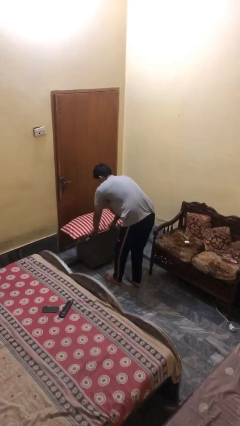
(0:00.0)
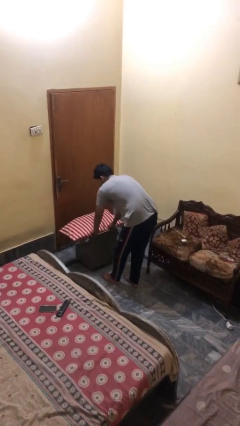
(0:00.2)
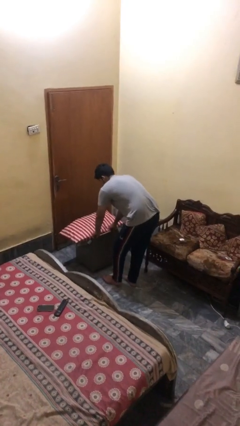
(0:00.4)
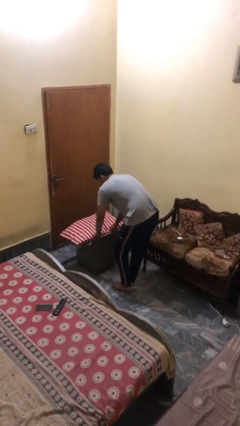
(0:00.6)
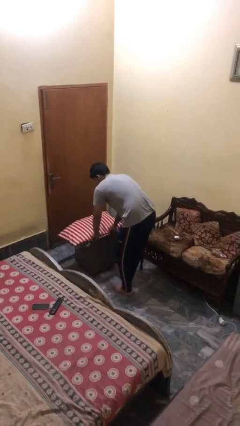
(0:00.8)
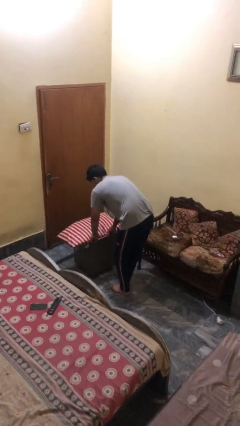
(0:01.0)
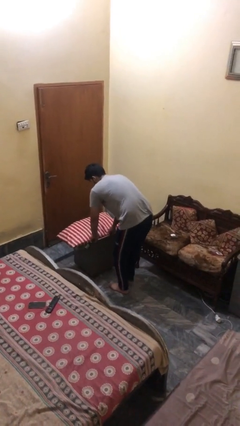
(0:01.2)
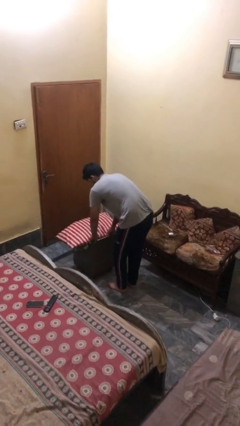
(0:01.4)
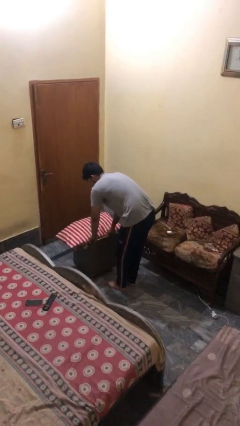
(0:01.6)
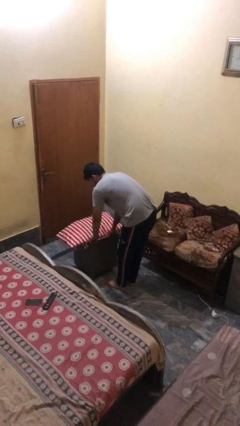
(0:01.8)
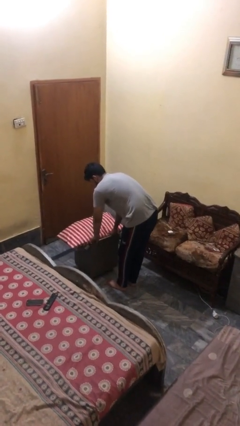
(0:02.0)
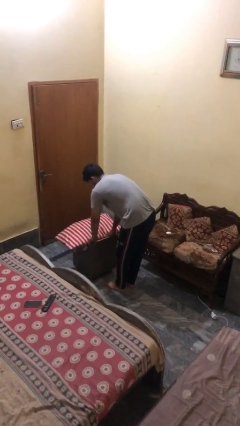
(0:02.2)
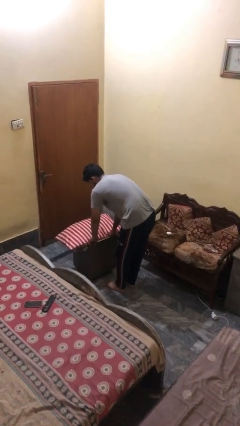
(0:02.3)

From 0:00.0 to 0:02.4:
person pulls wheeled cart

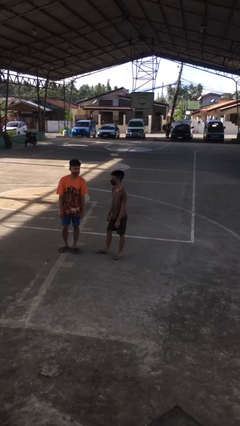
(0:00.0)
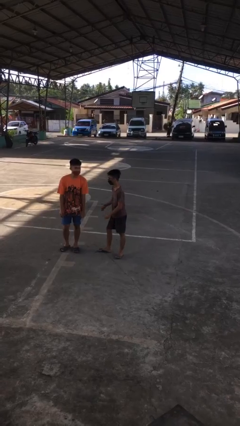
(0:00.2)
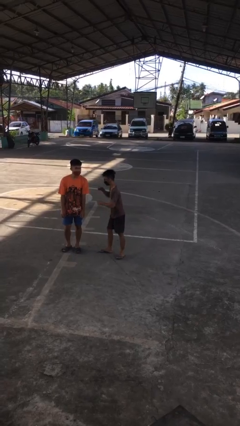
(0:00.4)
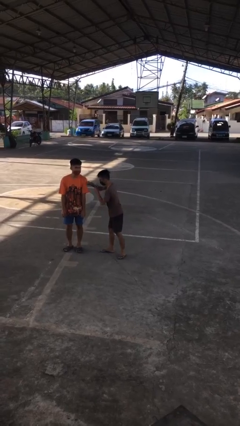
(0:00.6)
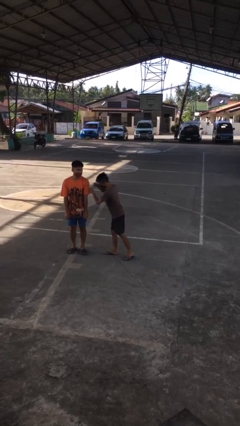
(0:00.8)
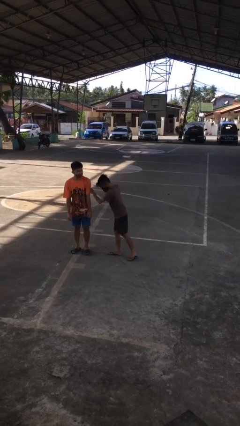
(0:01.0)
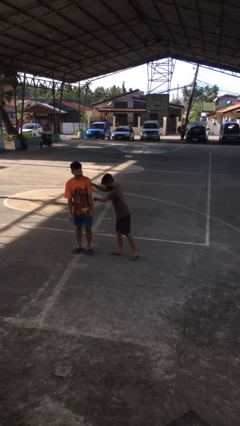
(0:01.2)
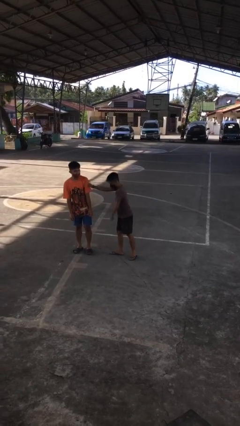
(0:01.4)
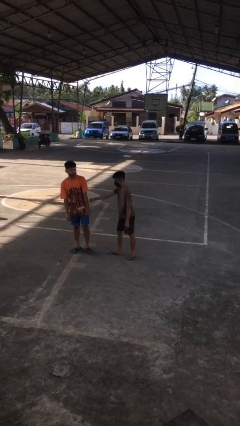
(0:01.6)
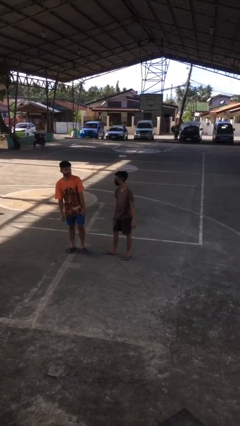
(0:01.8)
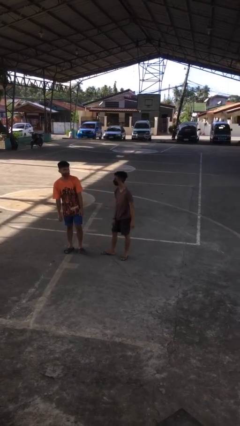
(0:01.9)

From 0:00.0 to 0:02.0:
person pounds shoulders of person

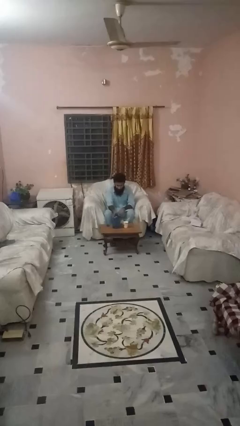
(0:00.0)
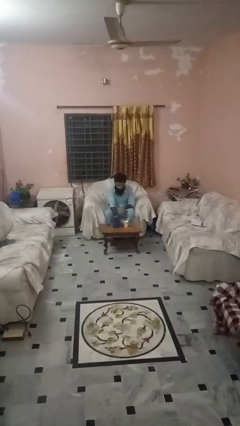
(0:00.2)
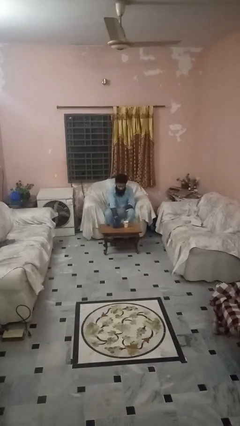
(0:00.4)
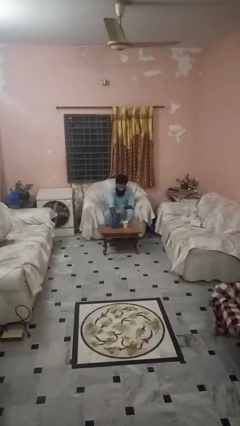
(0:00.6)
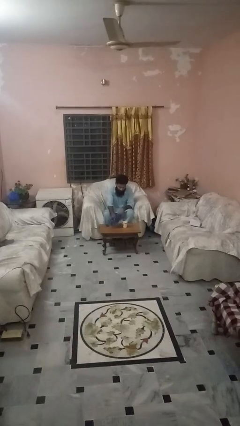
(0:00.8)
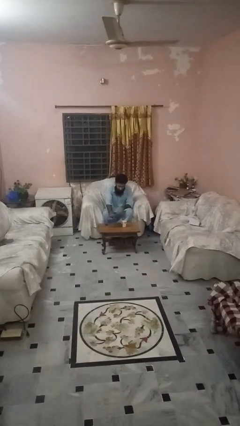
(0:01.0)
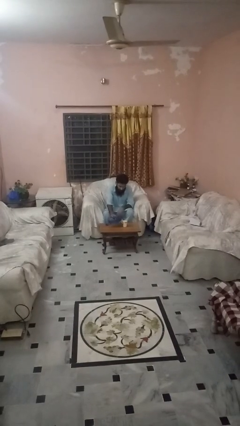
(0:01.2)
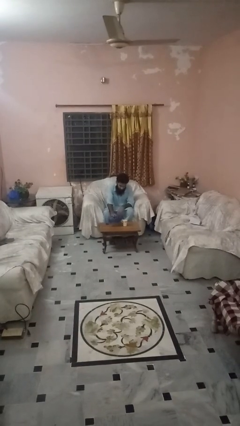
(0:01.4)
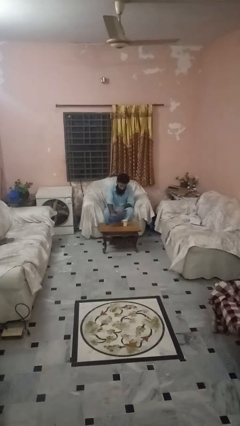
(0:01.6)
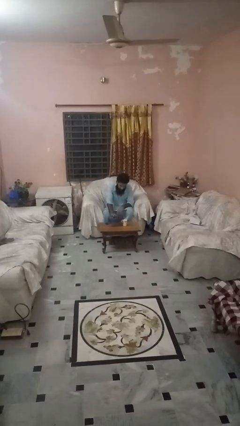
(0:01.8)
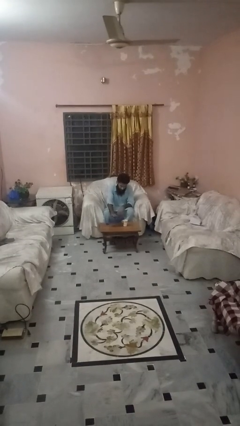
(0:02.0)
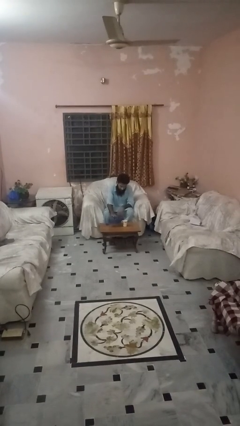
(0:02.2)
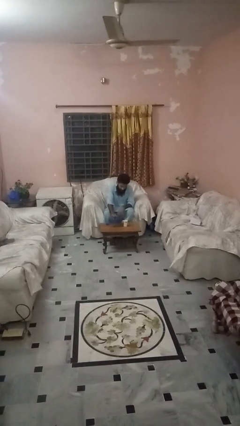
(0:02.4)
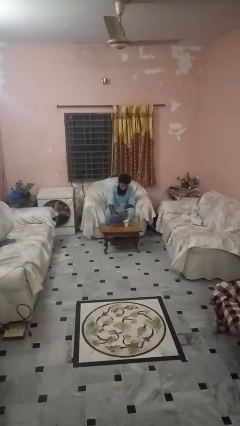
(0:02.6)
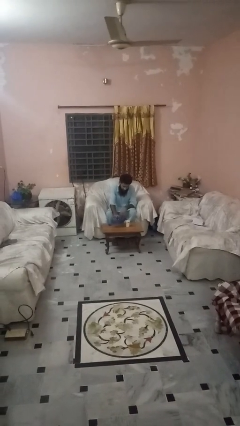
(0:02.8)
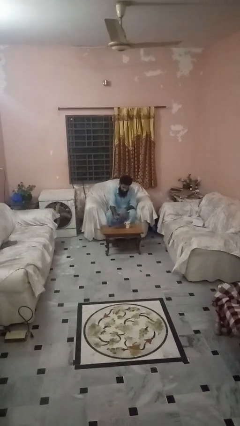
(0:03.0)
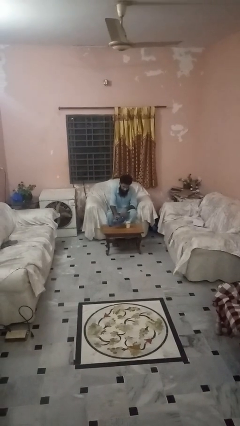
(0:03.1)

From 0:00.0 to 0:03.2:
person pours liquid into cup

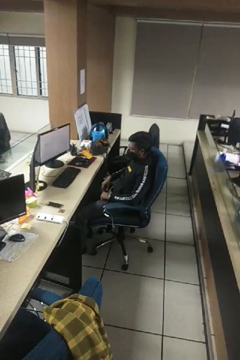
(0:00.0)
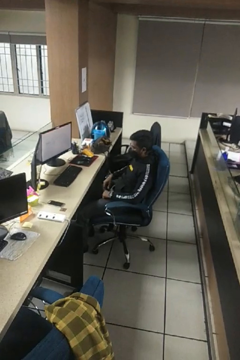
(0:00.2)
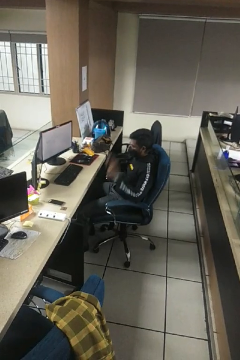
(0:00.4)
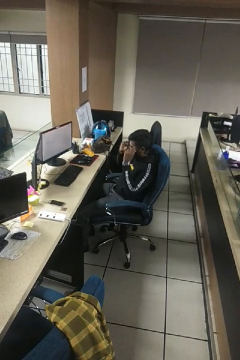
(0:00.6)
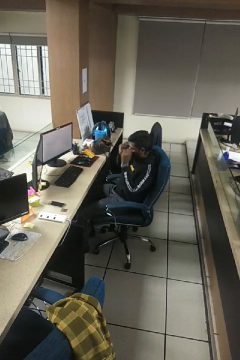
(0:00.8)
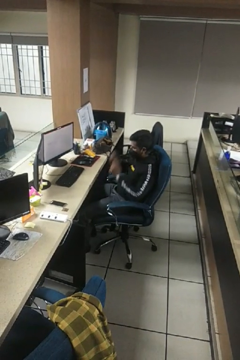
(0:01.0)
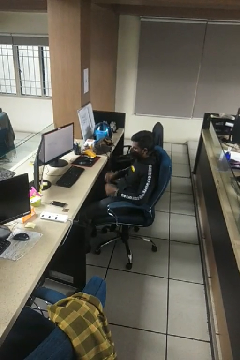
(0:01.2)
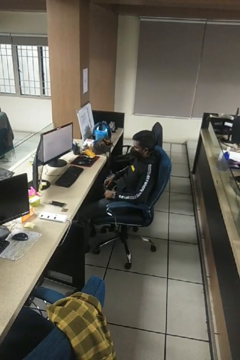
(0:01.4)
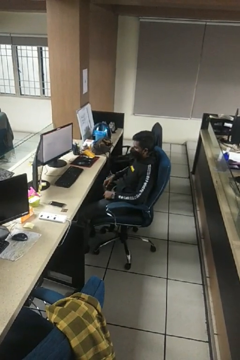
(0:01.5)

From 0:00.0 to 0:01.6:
person takes off glasses

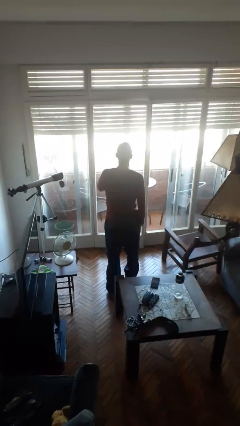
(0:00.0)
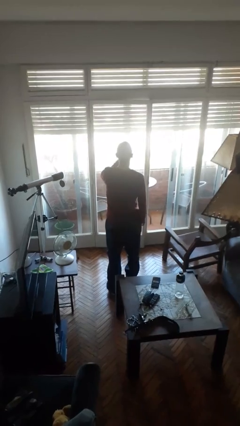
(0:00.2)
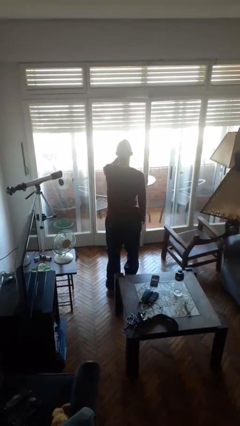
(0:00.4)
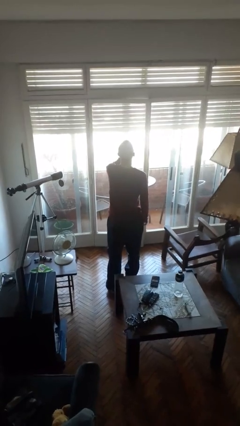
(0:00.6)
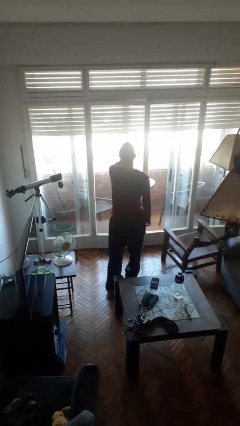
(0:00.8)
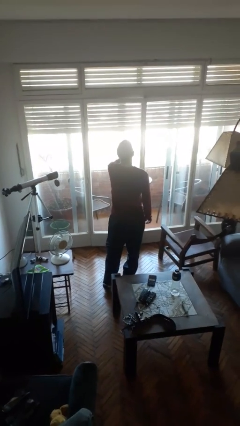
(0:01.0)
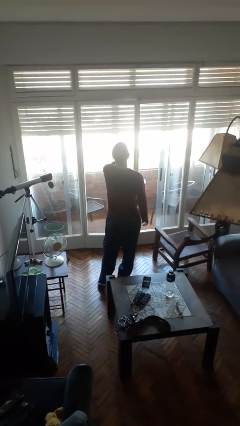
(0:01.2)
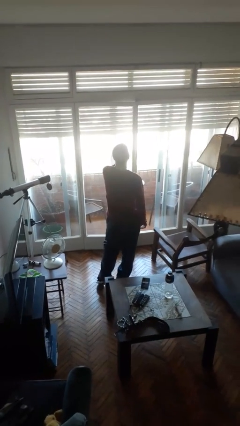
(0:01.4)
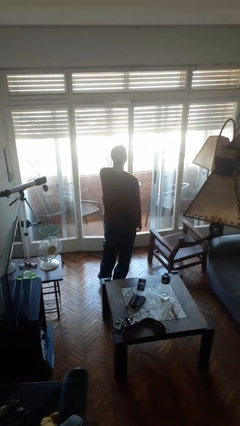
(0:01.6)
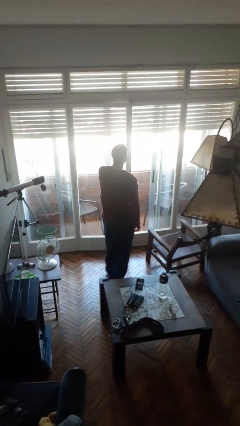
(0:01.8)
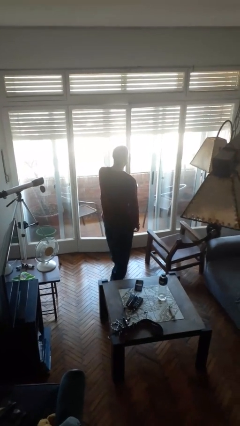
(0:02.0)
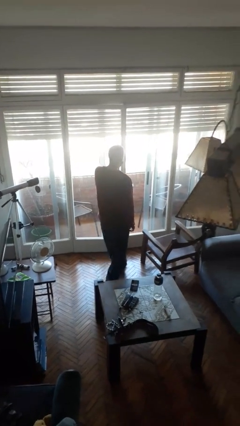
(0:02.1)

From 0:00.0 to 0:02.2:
person yawns

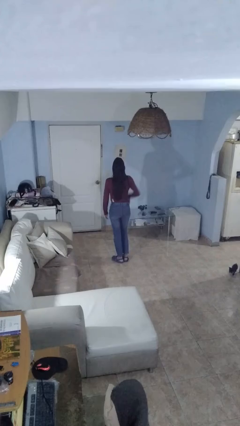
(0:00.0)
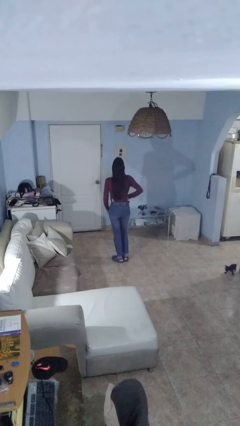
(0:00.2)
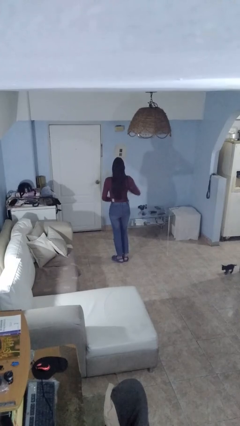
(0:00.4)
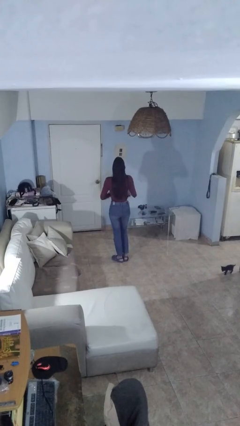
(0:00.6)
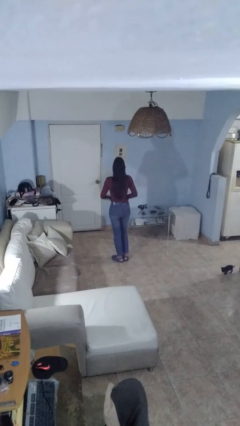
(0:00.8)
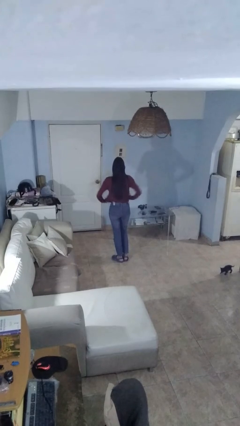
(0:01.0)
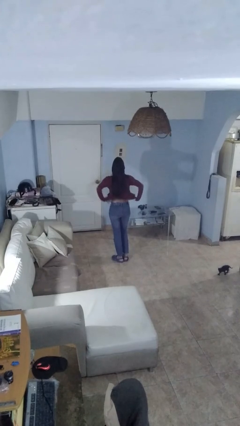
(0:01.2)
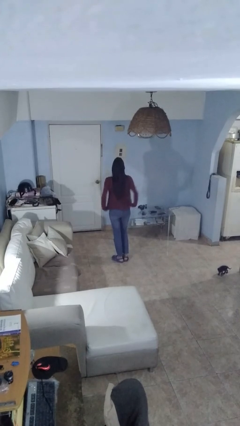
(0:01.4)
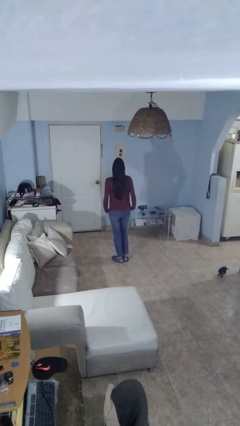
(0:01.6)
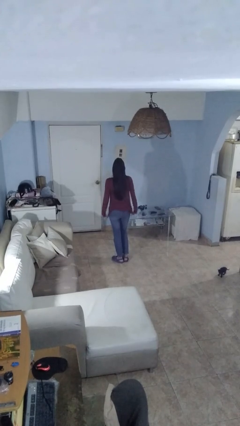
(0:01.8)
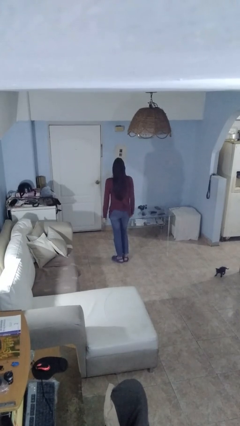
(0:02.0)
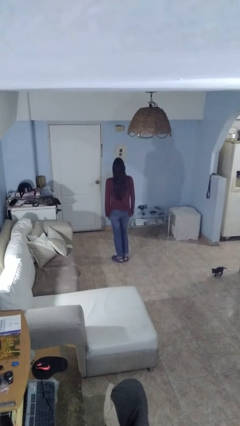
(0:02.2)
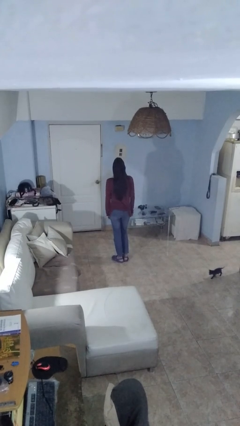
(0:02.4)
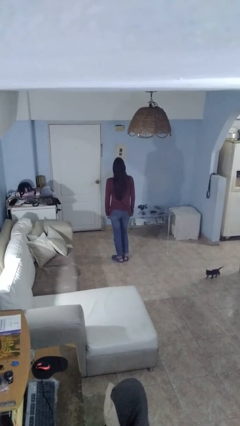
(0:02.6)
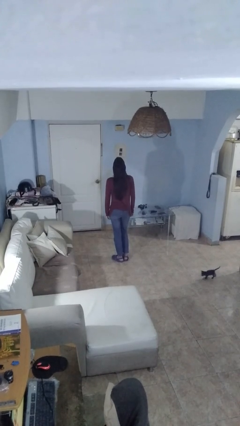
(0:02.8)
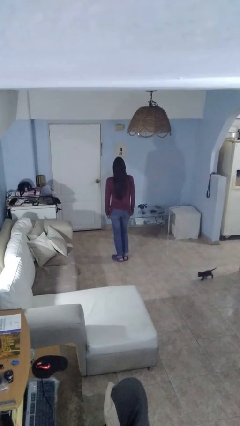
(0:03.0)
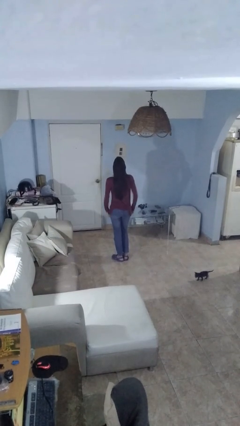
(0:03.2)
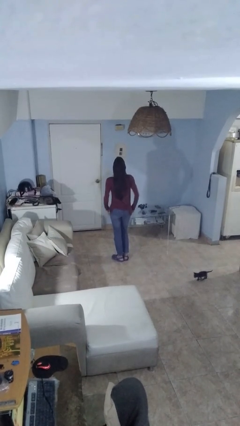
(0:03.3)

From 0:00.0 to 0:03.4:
person untucks shirt

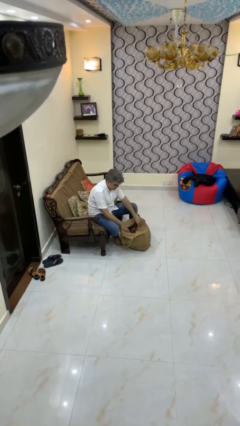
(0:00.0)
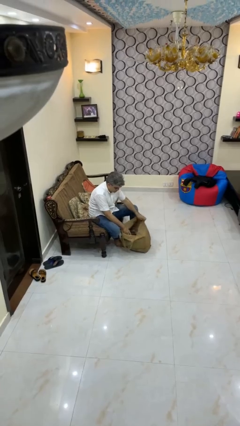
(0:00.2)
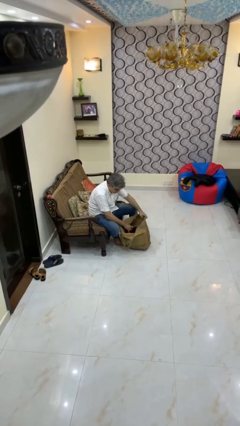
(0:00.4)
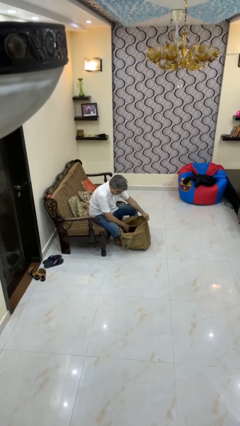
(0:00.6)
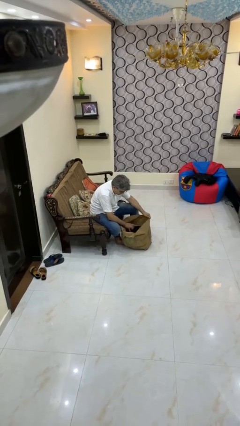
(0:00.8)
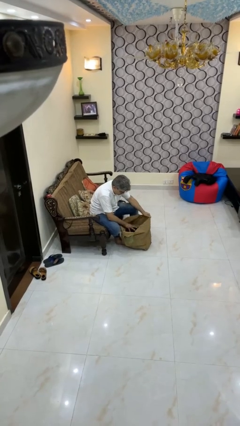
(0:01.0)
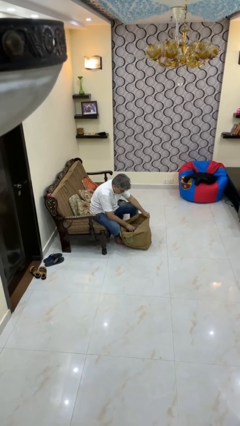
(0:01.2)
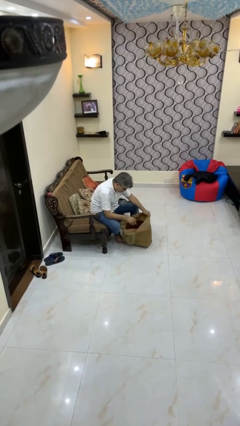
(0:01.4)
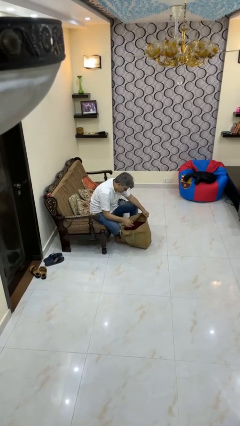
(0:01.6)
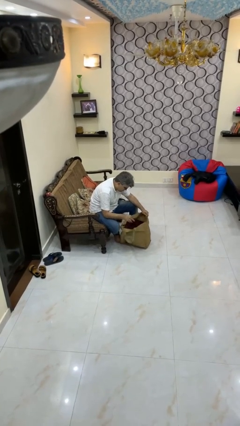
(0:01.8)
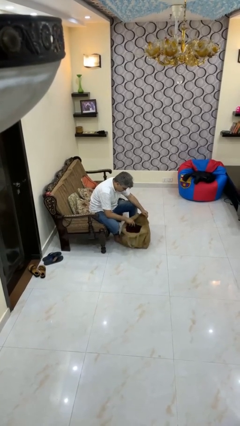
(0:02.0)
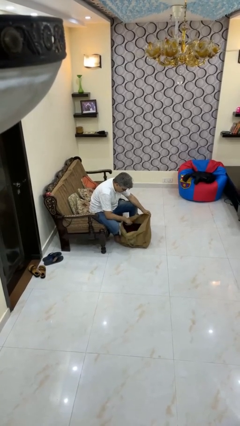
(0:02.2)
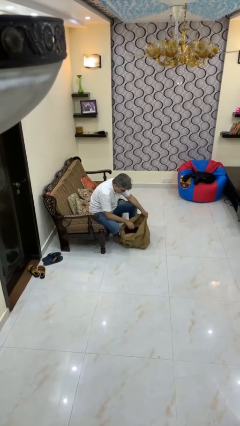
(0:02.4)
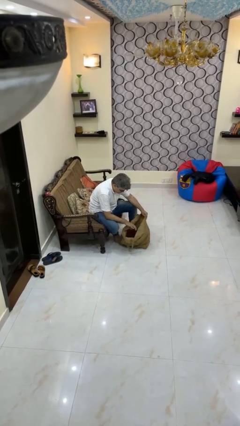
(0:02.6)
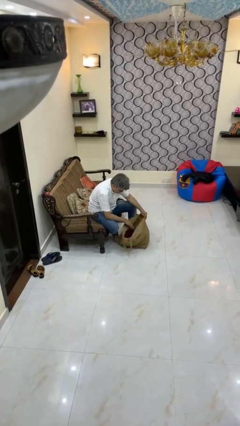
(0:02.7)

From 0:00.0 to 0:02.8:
person searches in bag
